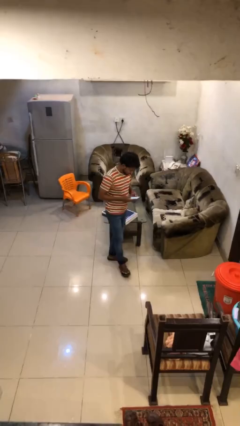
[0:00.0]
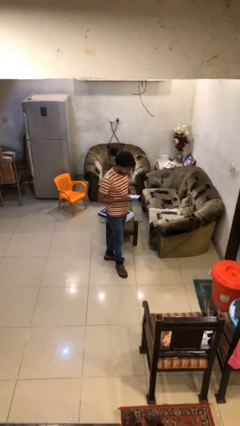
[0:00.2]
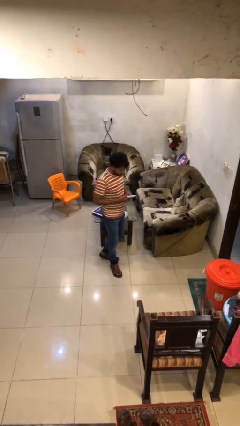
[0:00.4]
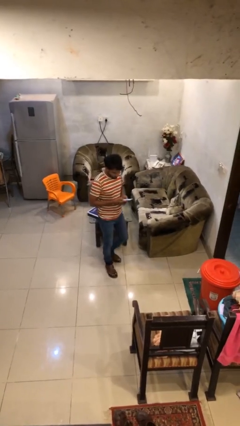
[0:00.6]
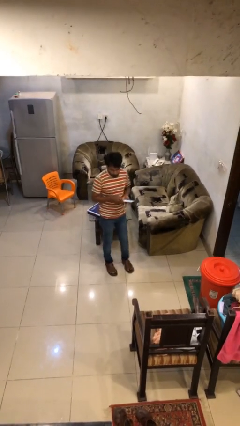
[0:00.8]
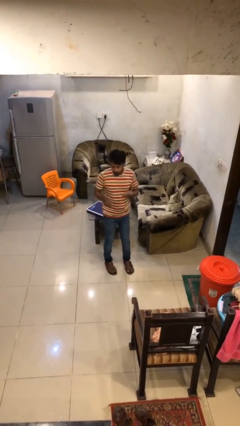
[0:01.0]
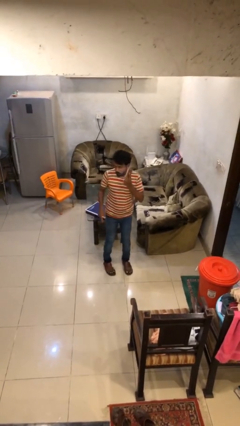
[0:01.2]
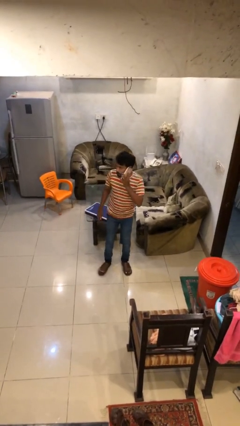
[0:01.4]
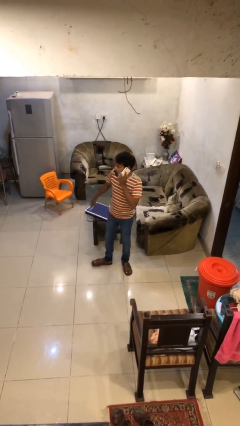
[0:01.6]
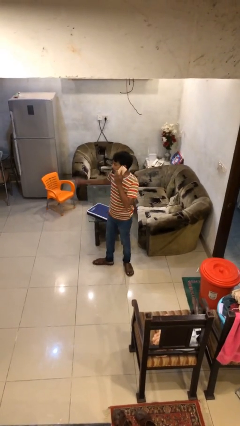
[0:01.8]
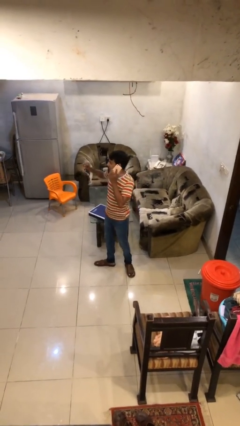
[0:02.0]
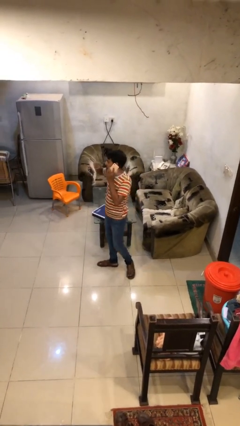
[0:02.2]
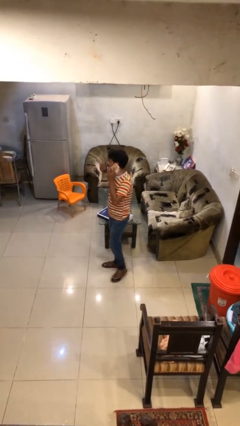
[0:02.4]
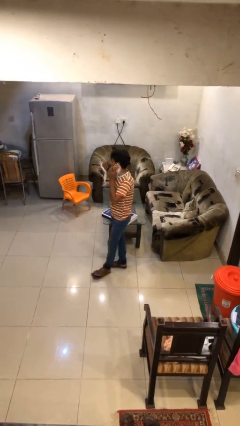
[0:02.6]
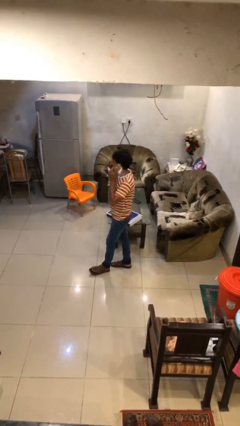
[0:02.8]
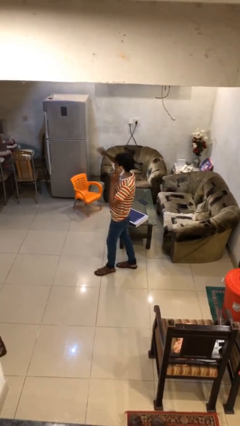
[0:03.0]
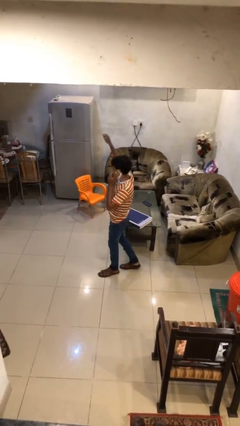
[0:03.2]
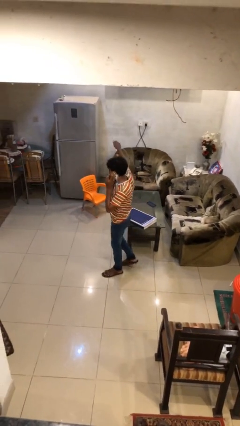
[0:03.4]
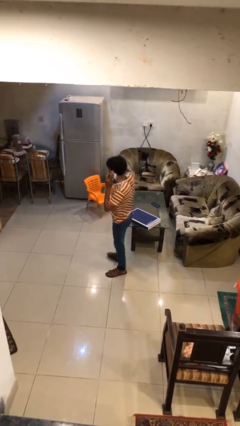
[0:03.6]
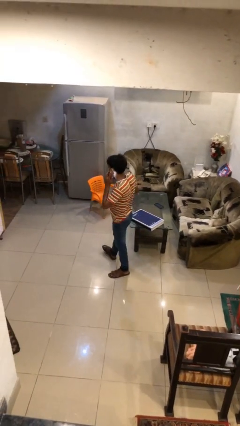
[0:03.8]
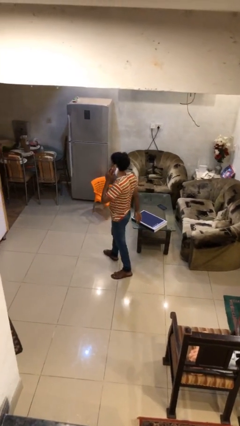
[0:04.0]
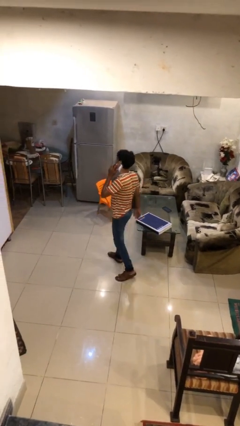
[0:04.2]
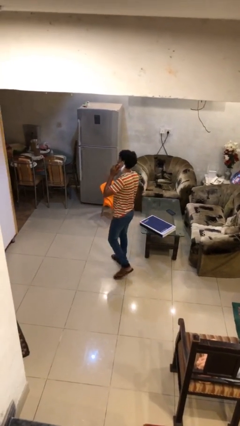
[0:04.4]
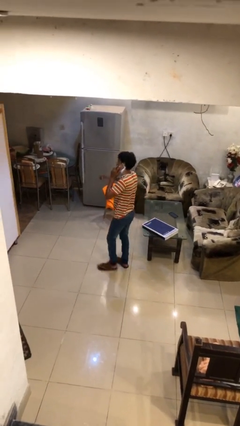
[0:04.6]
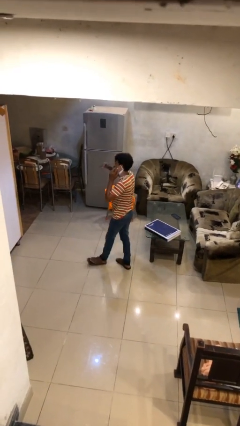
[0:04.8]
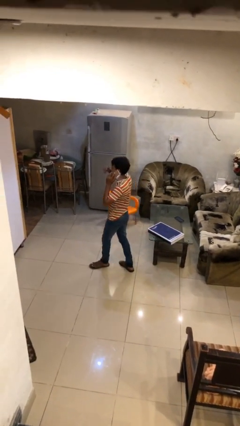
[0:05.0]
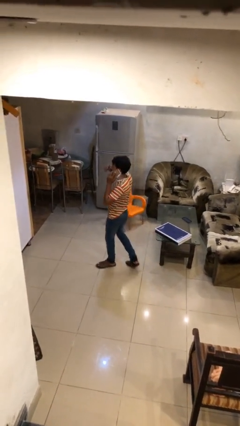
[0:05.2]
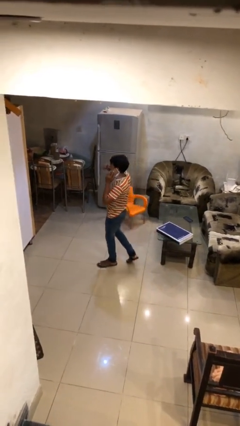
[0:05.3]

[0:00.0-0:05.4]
person talks on phone

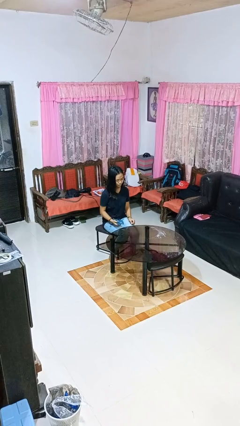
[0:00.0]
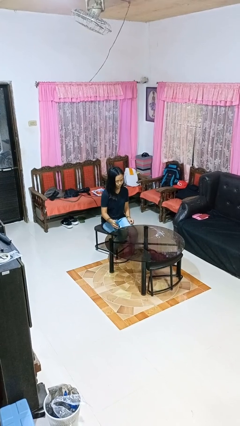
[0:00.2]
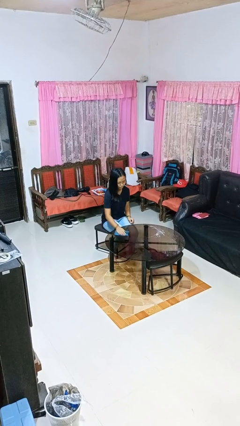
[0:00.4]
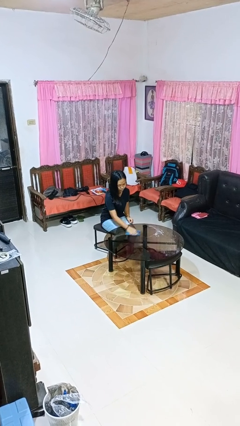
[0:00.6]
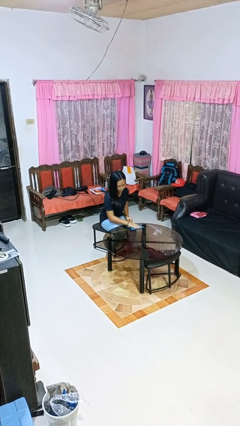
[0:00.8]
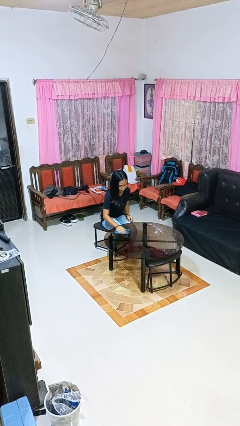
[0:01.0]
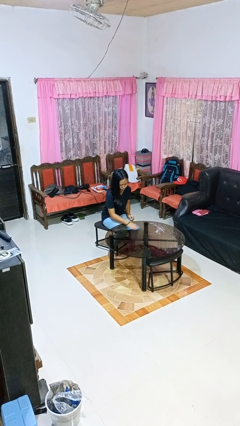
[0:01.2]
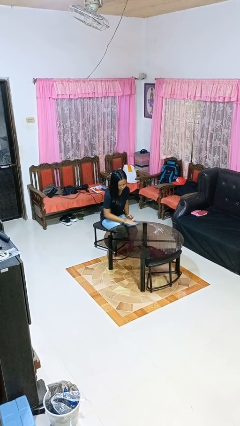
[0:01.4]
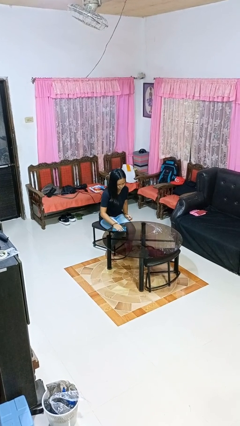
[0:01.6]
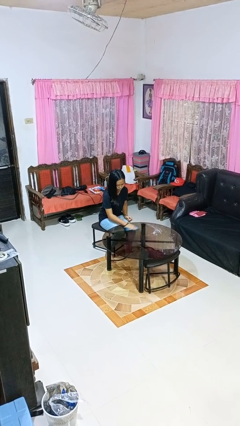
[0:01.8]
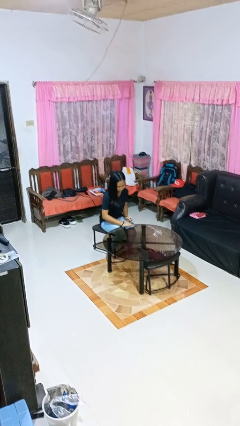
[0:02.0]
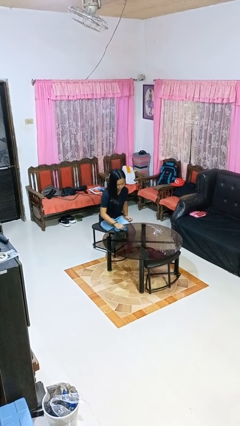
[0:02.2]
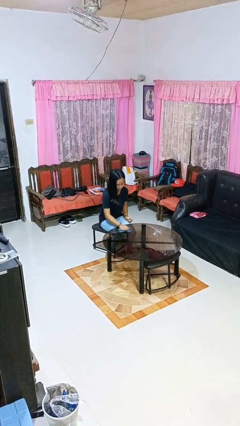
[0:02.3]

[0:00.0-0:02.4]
person cleans table with rag

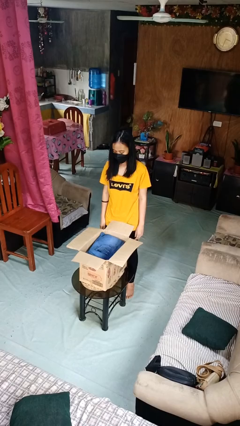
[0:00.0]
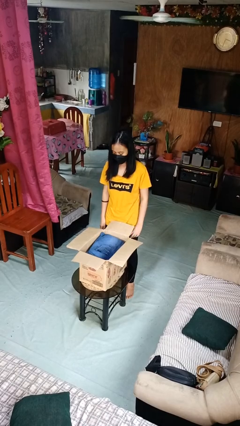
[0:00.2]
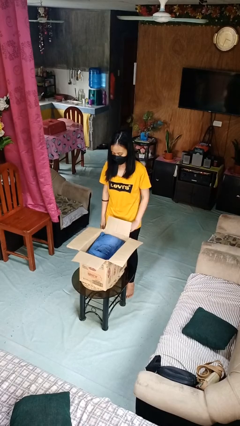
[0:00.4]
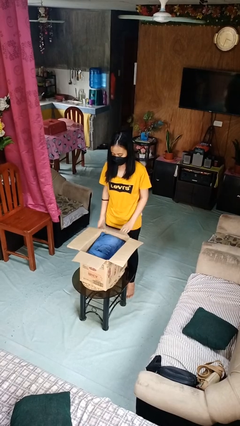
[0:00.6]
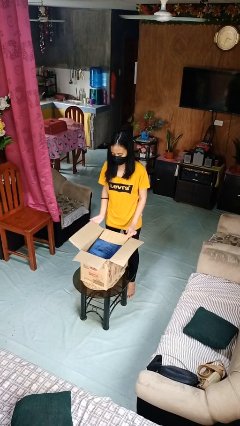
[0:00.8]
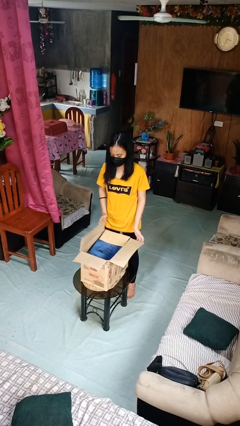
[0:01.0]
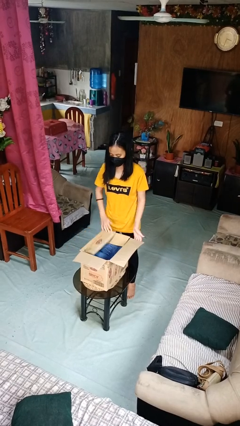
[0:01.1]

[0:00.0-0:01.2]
person closes box

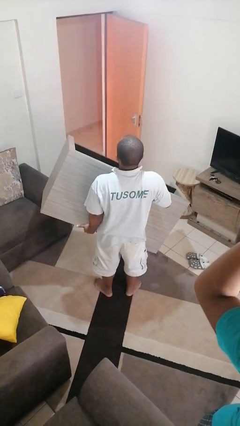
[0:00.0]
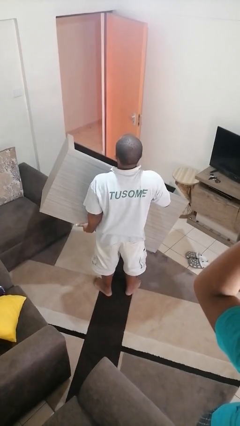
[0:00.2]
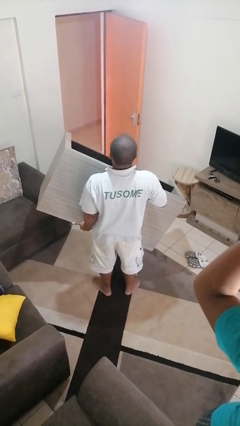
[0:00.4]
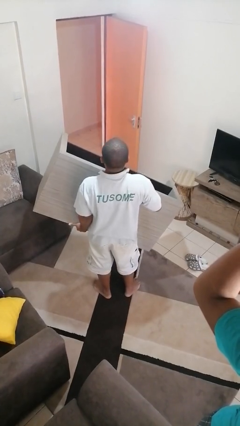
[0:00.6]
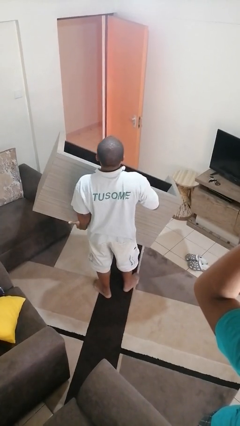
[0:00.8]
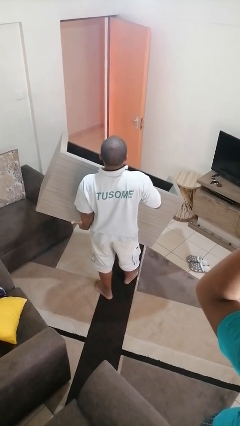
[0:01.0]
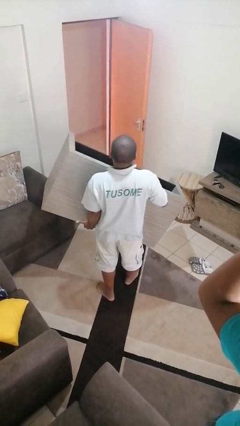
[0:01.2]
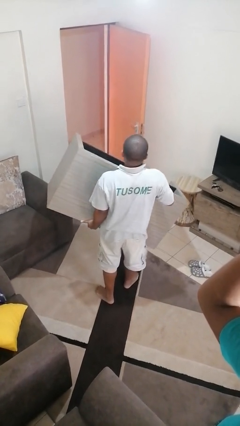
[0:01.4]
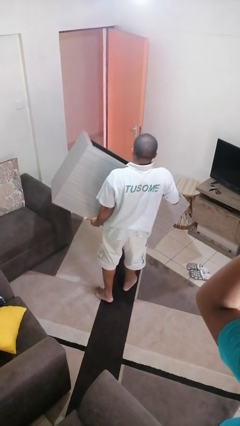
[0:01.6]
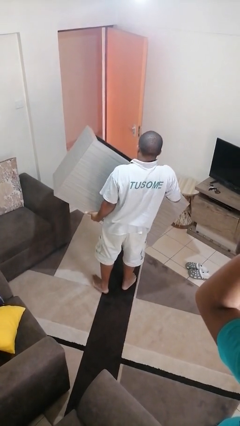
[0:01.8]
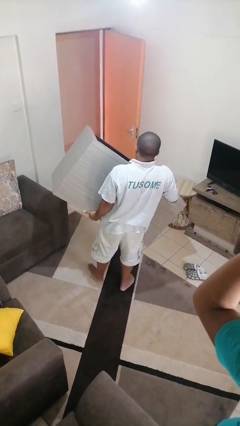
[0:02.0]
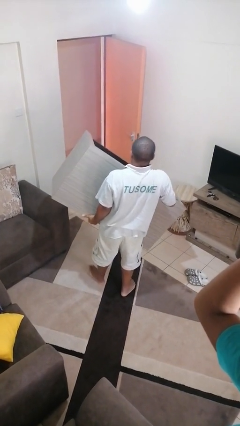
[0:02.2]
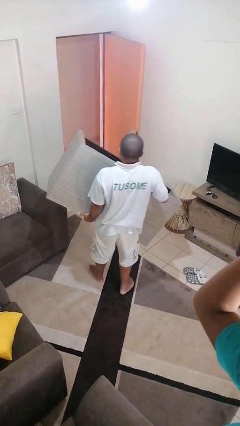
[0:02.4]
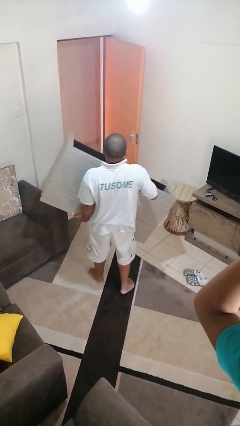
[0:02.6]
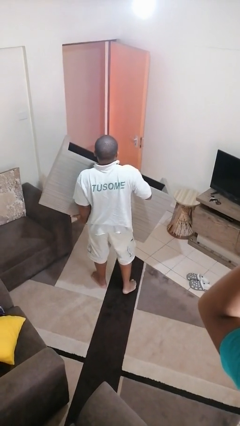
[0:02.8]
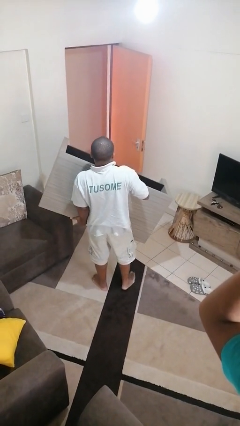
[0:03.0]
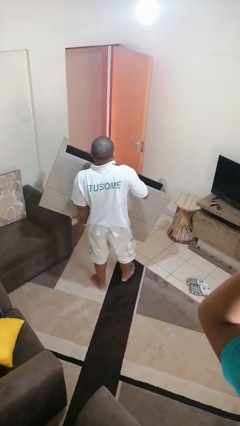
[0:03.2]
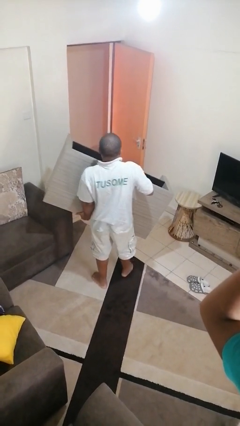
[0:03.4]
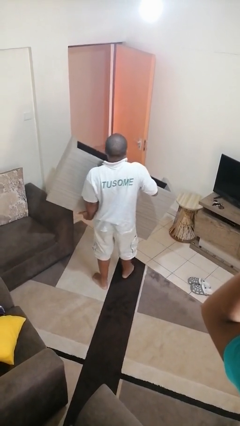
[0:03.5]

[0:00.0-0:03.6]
person carries furniture

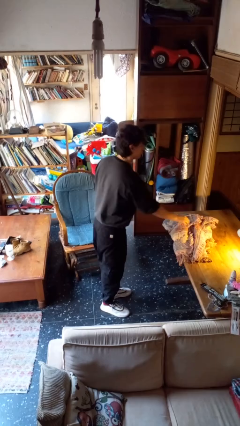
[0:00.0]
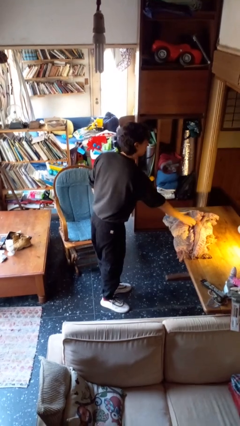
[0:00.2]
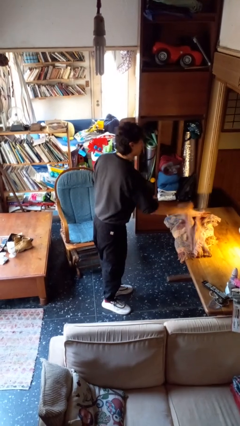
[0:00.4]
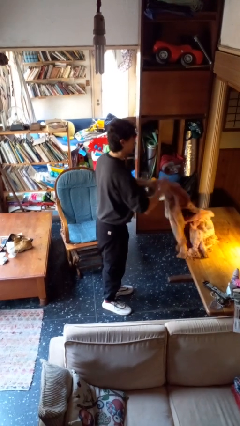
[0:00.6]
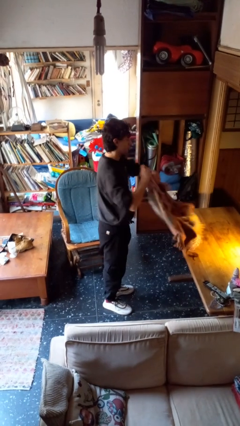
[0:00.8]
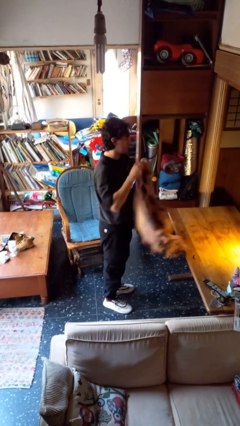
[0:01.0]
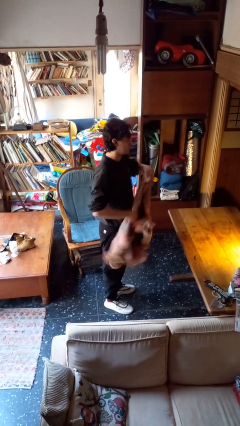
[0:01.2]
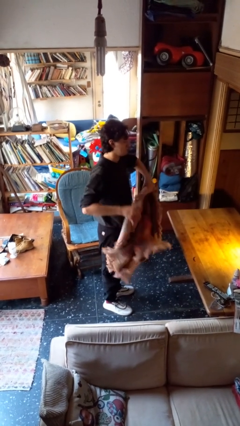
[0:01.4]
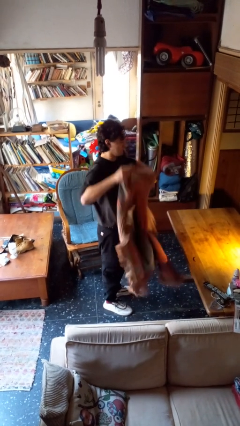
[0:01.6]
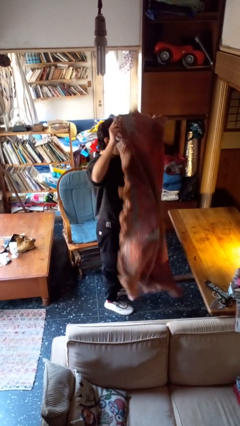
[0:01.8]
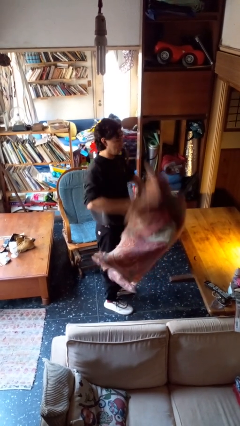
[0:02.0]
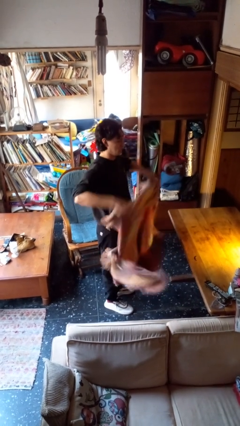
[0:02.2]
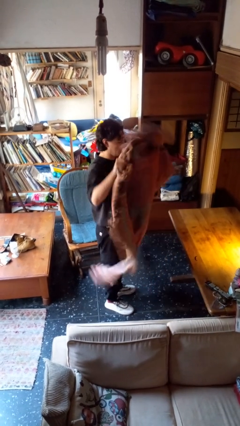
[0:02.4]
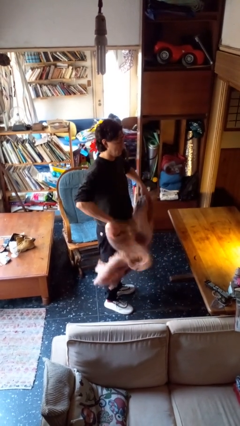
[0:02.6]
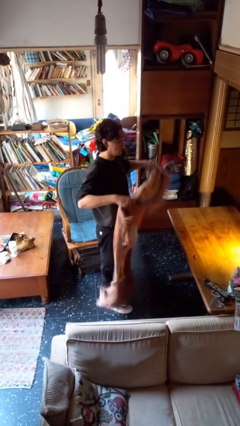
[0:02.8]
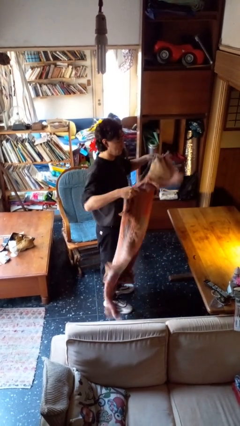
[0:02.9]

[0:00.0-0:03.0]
person unfolds blanket

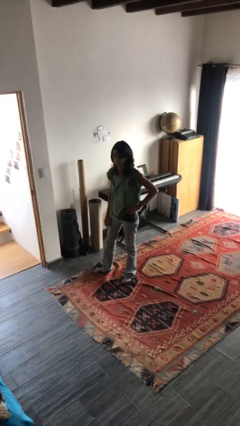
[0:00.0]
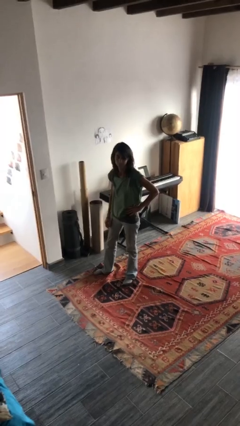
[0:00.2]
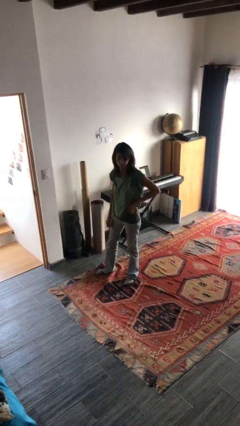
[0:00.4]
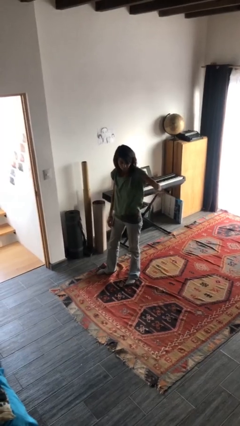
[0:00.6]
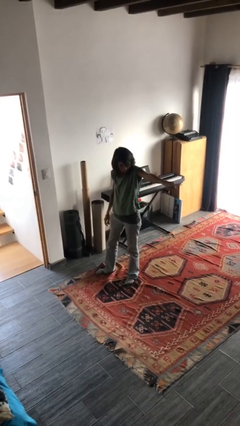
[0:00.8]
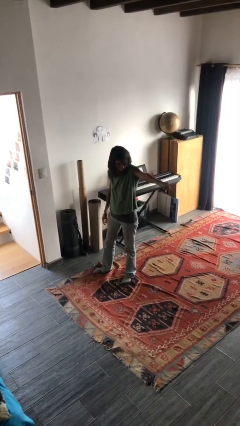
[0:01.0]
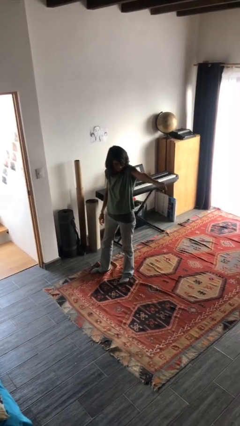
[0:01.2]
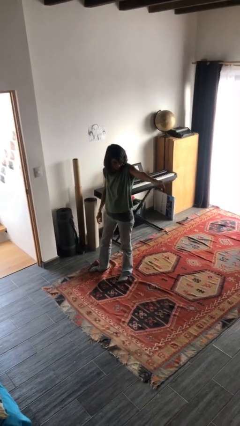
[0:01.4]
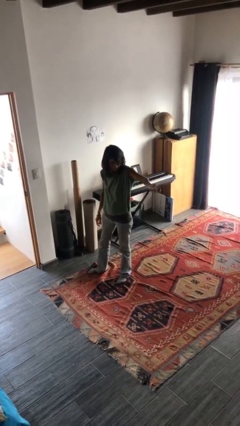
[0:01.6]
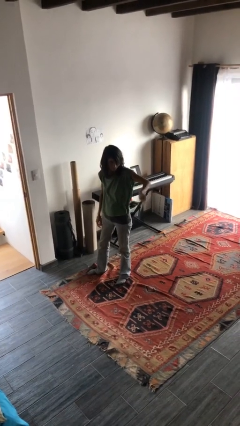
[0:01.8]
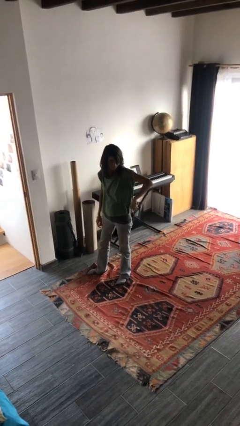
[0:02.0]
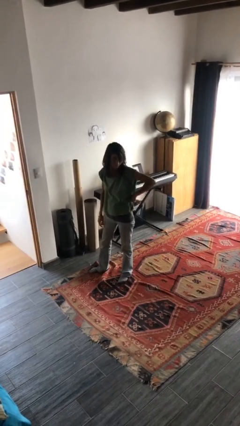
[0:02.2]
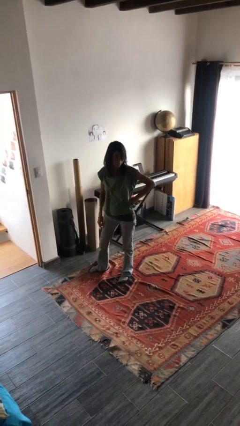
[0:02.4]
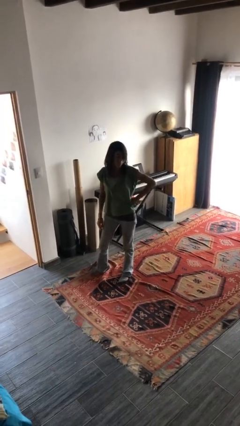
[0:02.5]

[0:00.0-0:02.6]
person points at person
